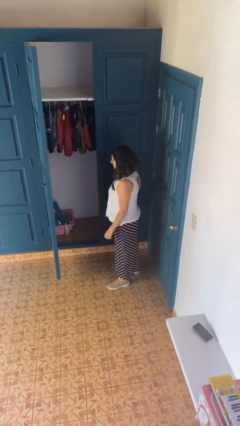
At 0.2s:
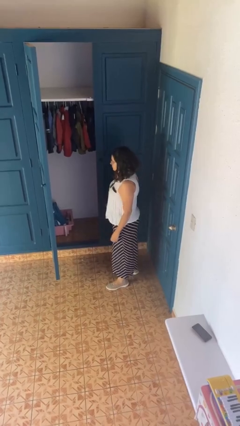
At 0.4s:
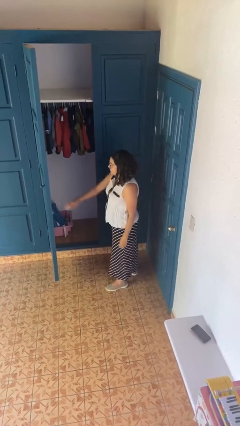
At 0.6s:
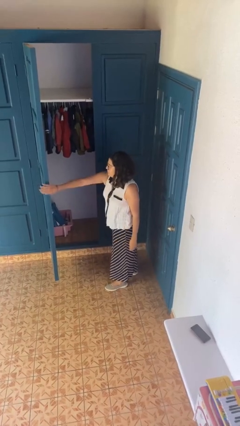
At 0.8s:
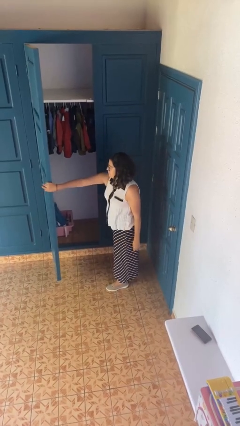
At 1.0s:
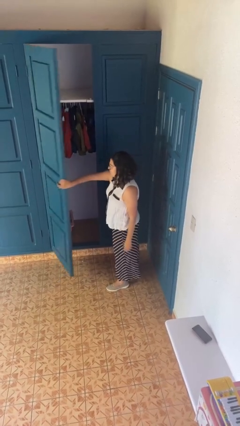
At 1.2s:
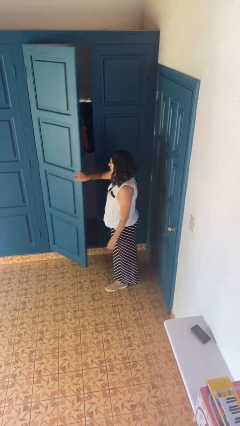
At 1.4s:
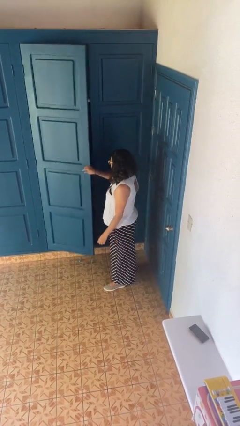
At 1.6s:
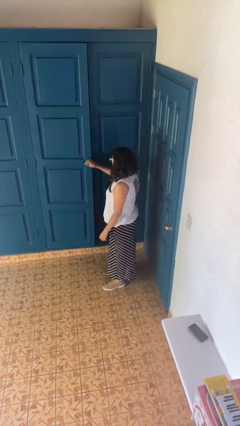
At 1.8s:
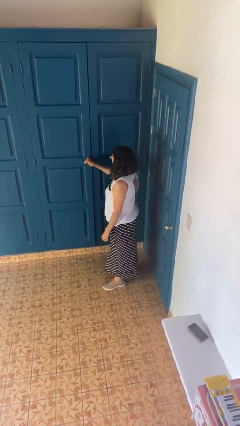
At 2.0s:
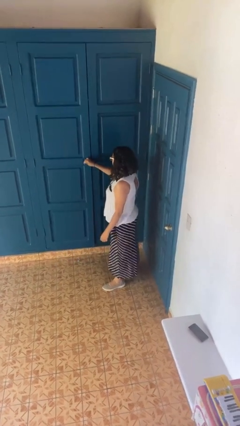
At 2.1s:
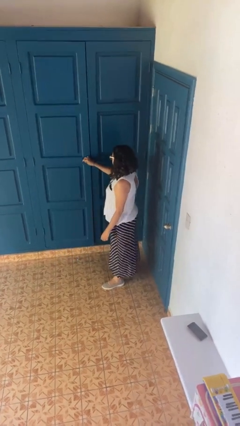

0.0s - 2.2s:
person closes closet door

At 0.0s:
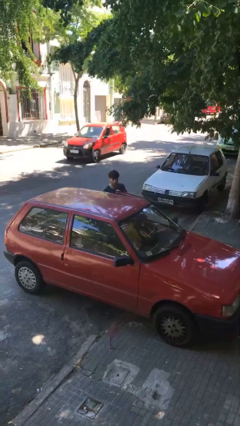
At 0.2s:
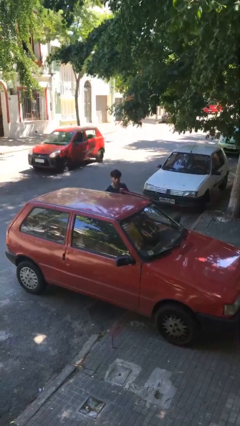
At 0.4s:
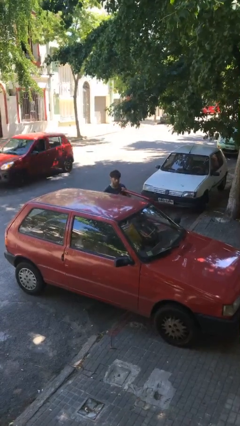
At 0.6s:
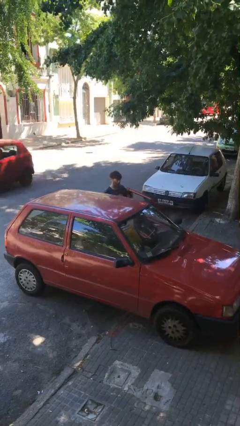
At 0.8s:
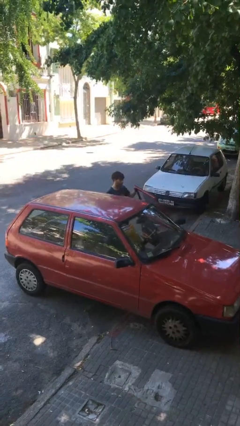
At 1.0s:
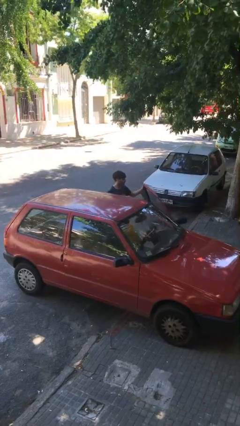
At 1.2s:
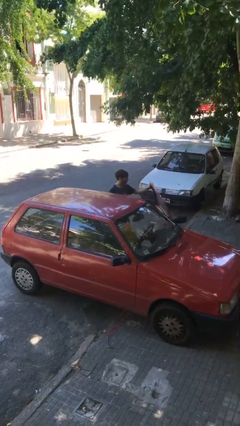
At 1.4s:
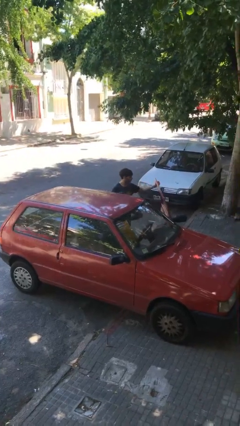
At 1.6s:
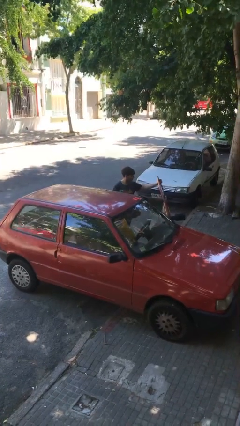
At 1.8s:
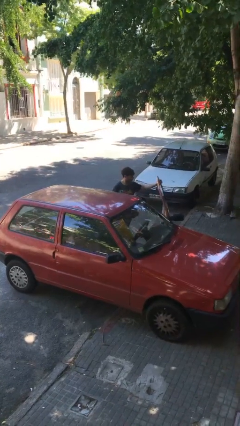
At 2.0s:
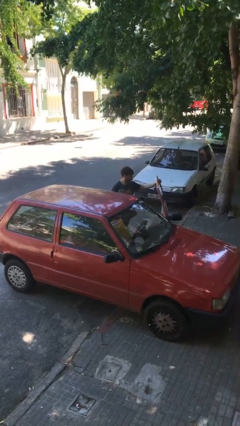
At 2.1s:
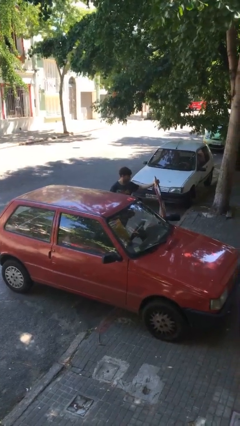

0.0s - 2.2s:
person opens car door

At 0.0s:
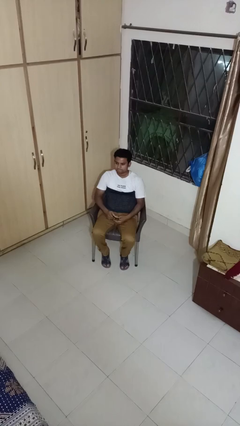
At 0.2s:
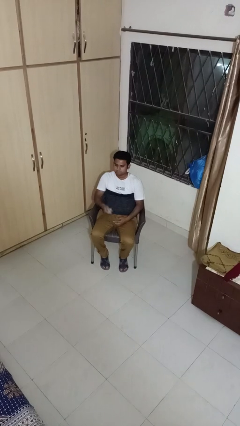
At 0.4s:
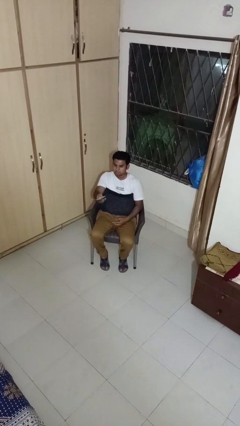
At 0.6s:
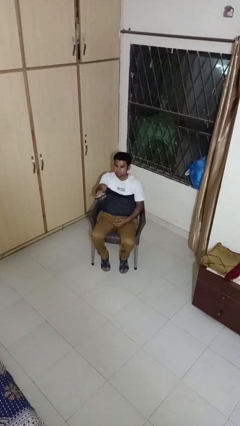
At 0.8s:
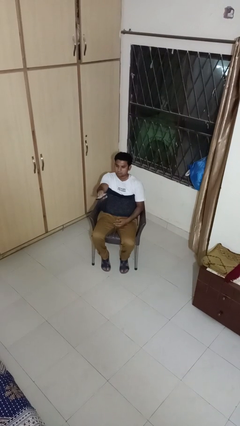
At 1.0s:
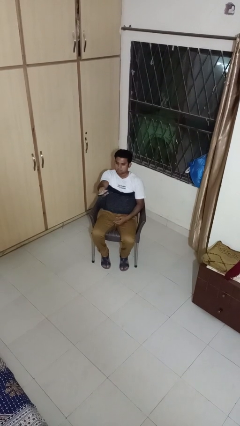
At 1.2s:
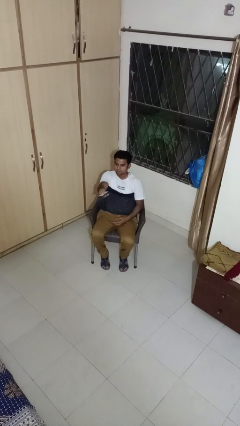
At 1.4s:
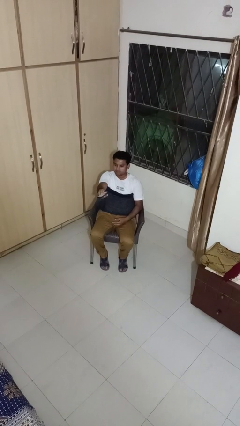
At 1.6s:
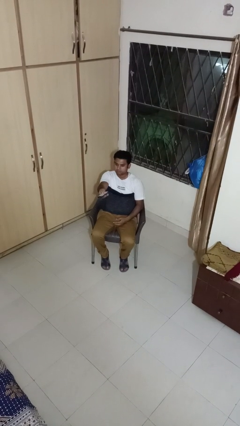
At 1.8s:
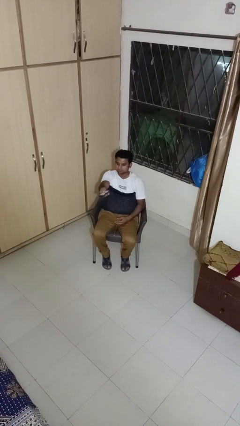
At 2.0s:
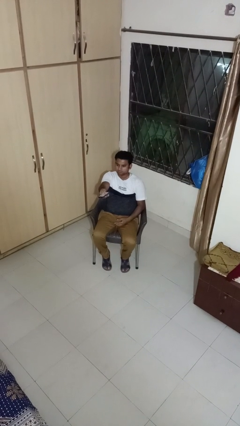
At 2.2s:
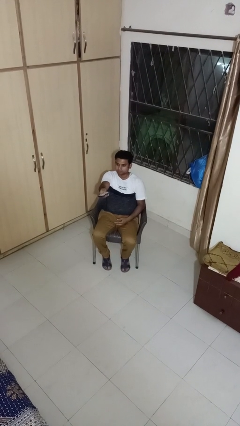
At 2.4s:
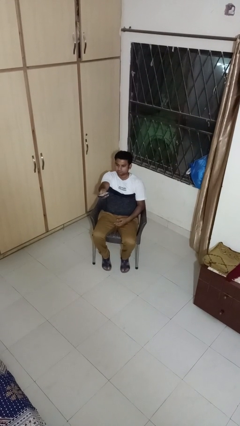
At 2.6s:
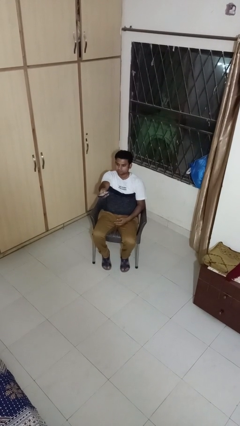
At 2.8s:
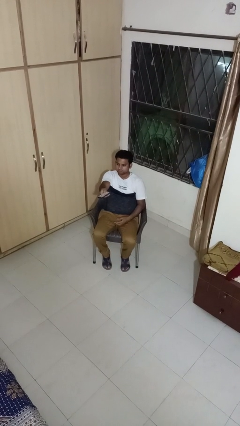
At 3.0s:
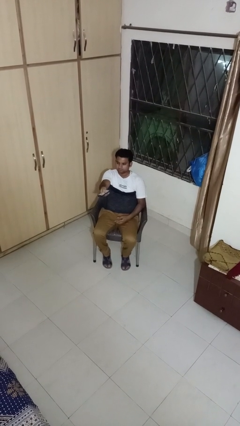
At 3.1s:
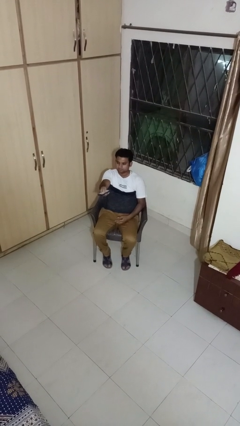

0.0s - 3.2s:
person uses television remote

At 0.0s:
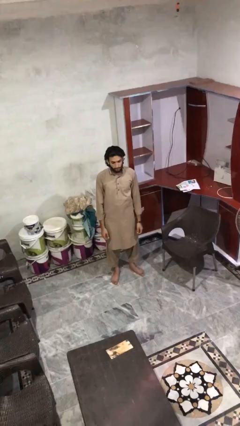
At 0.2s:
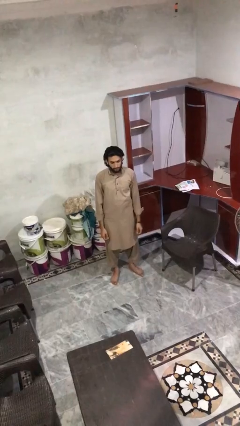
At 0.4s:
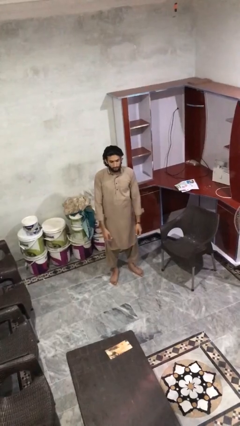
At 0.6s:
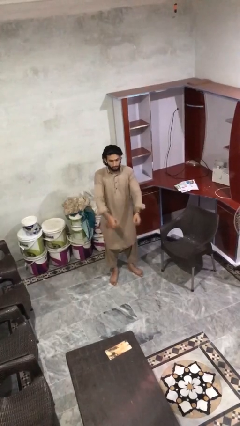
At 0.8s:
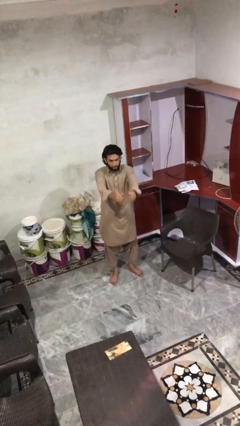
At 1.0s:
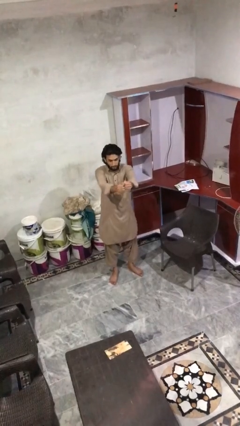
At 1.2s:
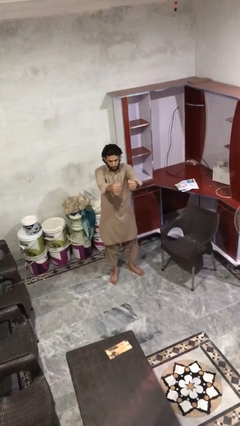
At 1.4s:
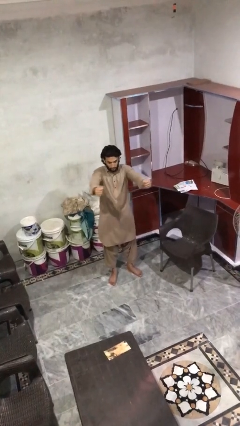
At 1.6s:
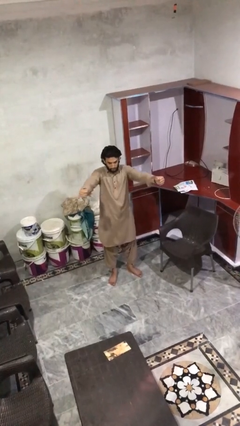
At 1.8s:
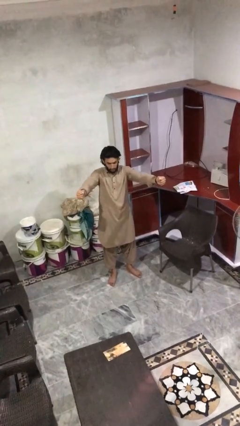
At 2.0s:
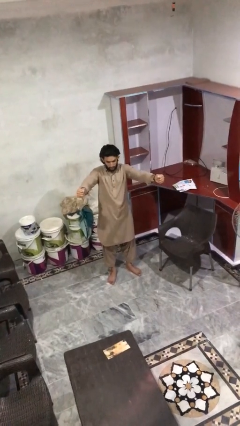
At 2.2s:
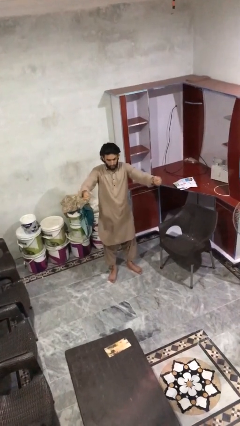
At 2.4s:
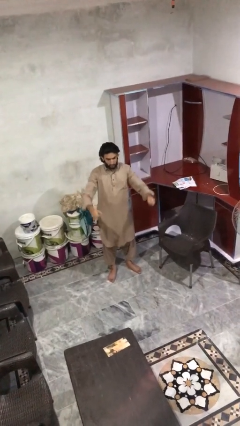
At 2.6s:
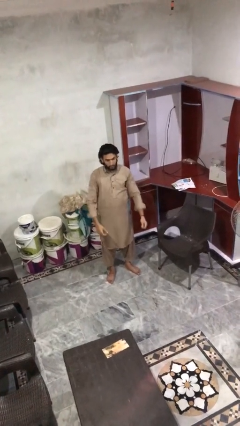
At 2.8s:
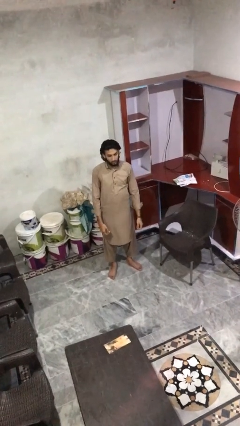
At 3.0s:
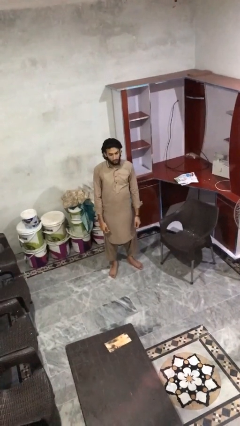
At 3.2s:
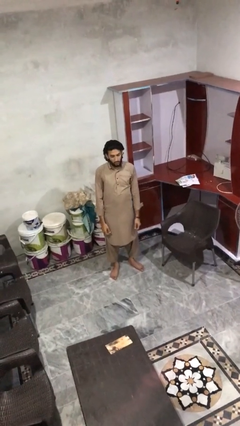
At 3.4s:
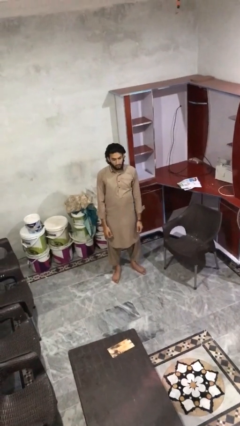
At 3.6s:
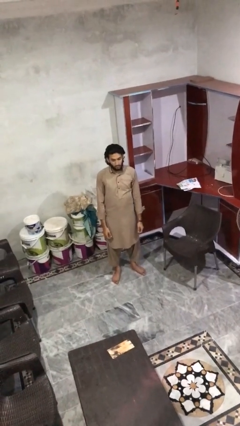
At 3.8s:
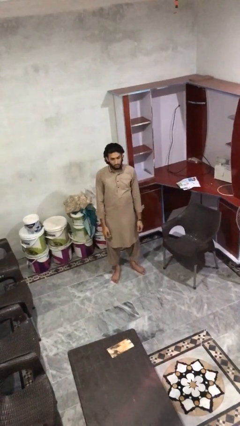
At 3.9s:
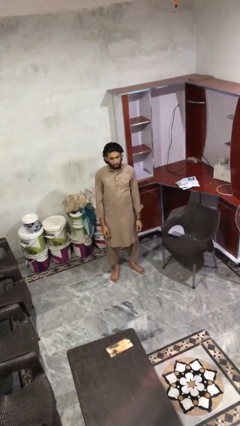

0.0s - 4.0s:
person gestures zoom in

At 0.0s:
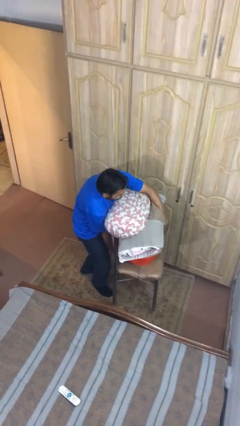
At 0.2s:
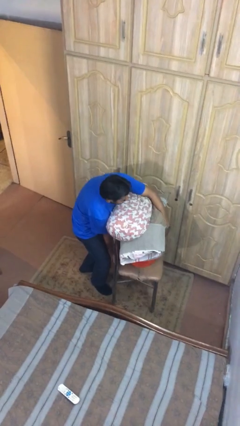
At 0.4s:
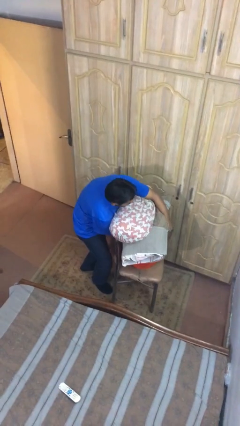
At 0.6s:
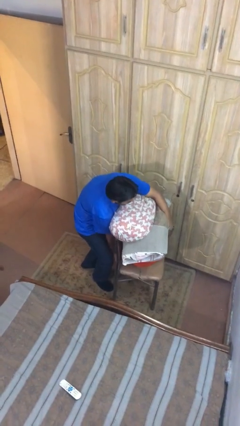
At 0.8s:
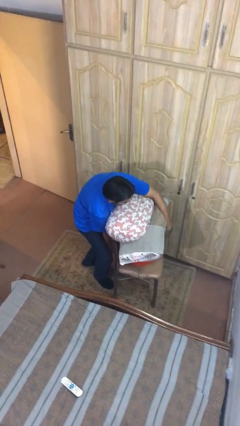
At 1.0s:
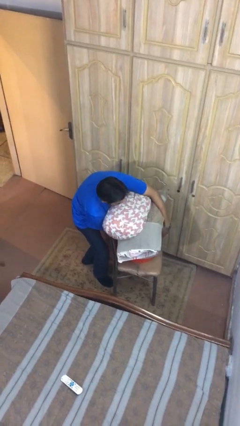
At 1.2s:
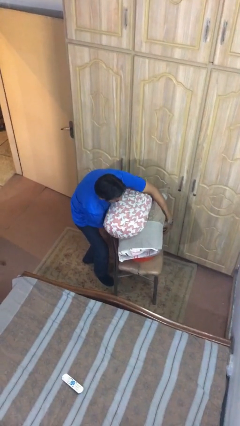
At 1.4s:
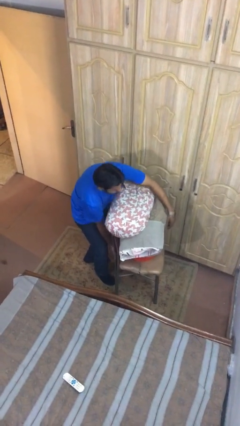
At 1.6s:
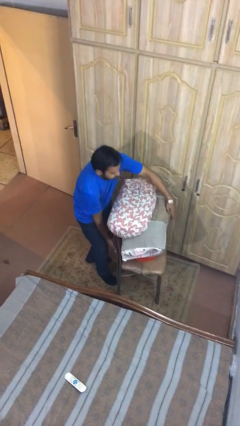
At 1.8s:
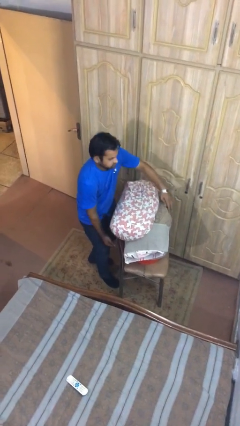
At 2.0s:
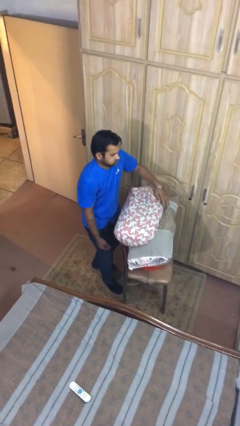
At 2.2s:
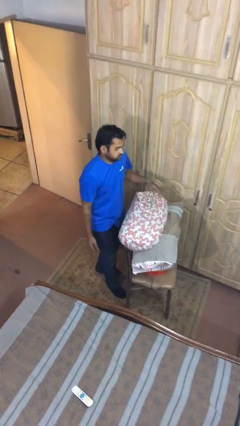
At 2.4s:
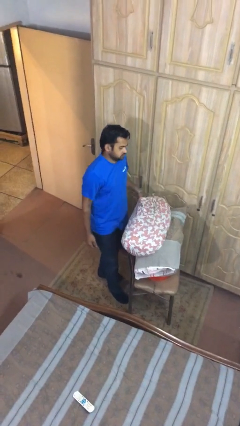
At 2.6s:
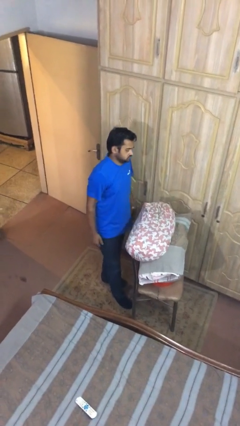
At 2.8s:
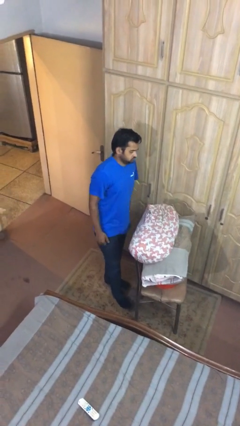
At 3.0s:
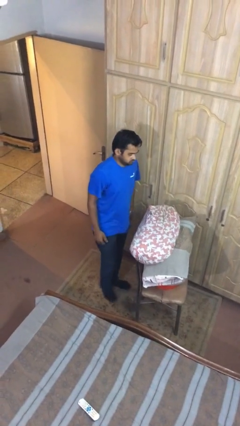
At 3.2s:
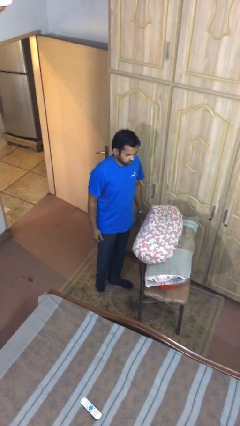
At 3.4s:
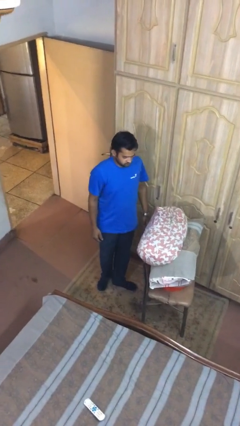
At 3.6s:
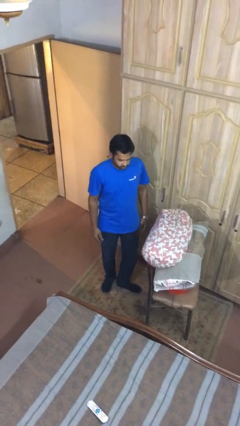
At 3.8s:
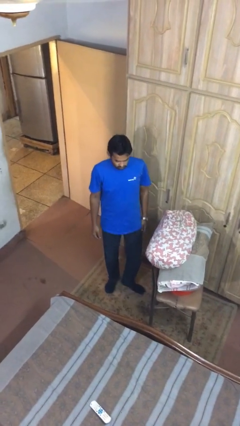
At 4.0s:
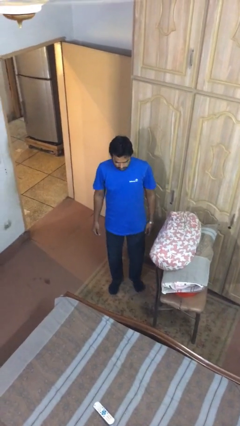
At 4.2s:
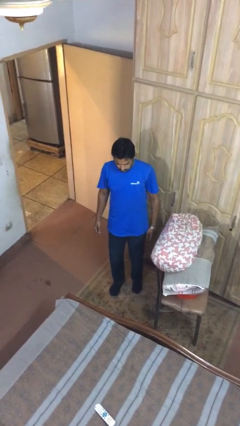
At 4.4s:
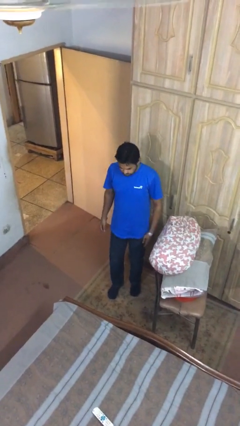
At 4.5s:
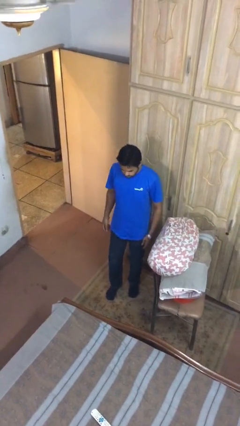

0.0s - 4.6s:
person puts down object on floor

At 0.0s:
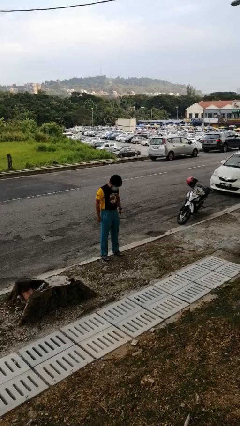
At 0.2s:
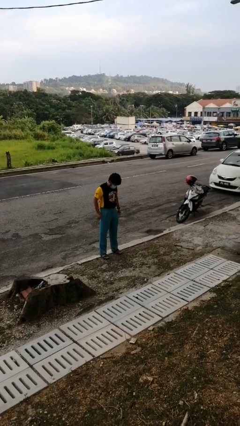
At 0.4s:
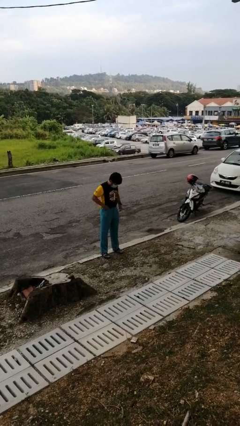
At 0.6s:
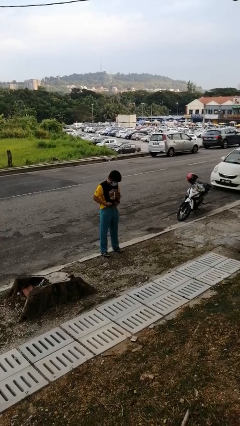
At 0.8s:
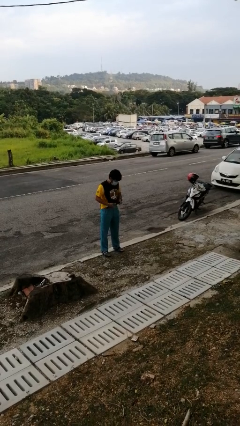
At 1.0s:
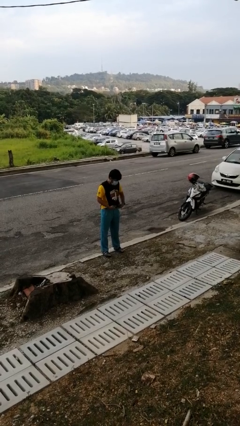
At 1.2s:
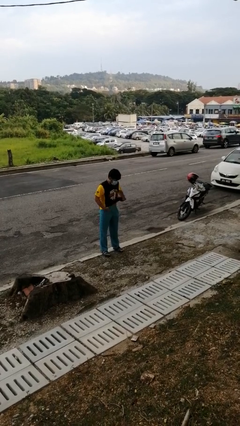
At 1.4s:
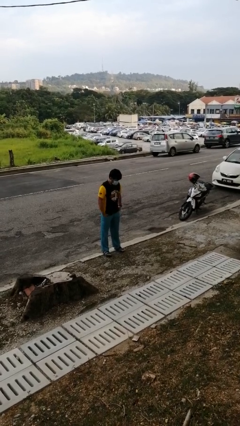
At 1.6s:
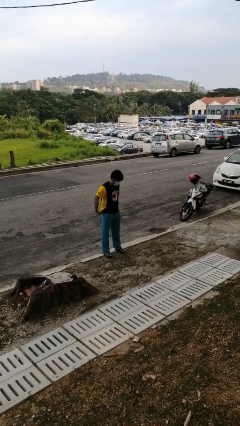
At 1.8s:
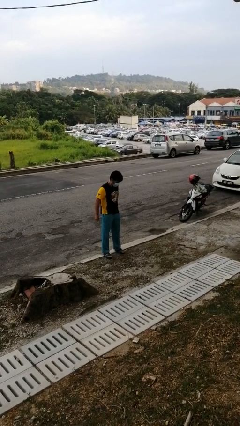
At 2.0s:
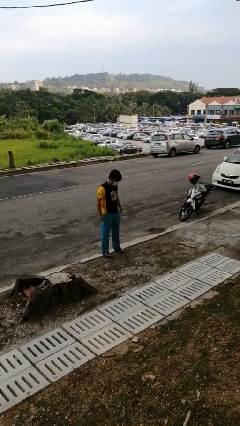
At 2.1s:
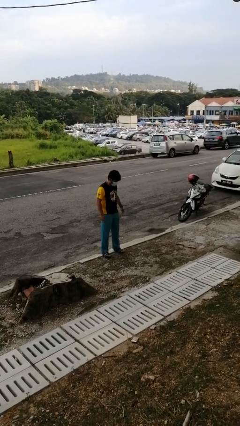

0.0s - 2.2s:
person untucks shirt
